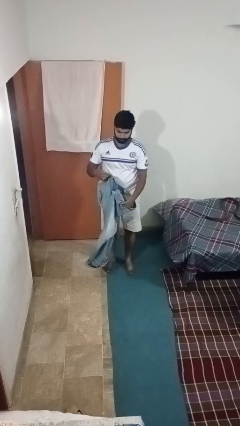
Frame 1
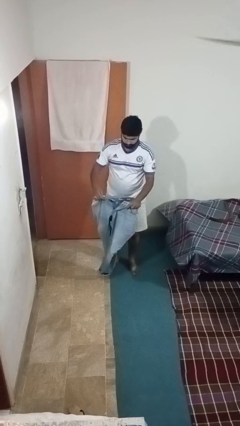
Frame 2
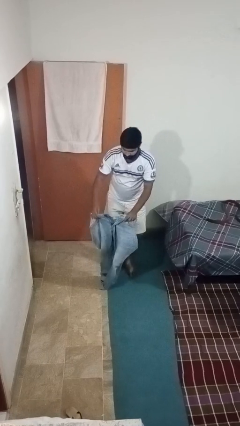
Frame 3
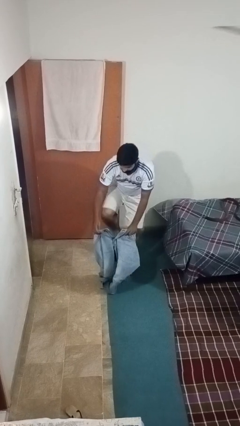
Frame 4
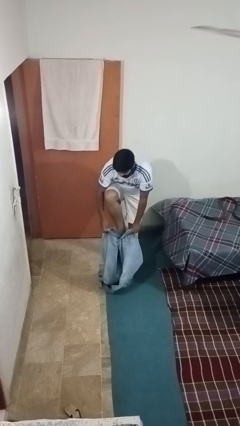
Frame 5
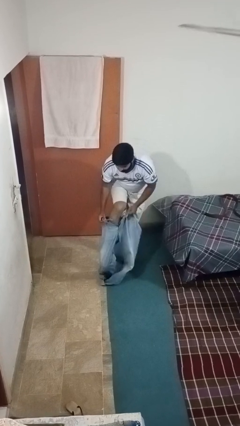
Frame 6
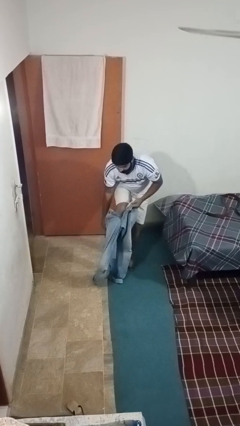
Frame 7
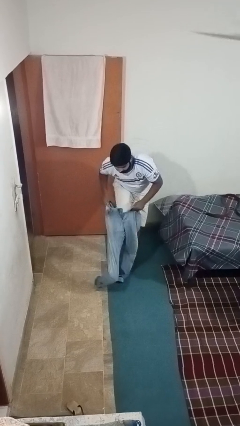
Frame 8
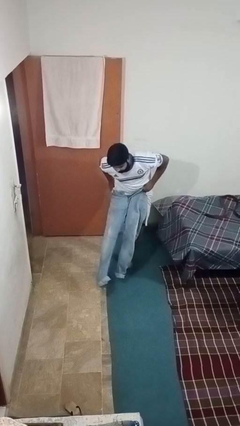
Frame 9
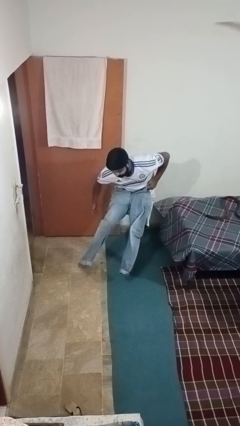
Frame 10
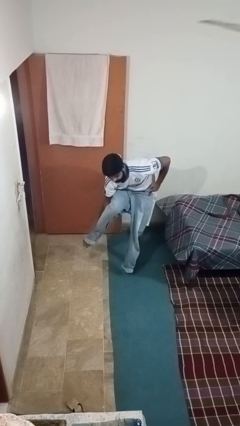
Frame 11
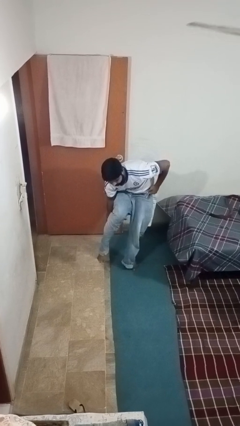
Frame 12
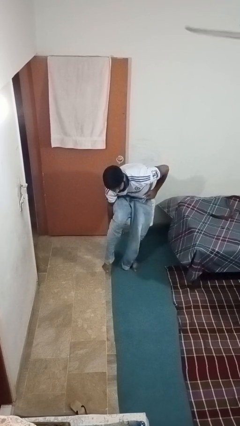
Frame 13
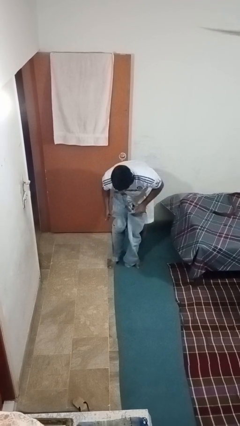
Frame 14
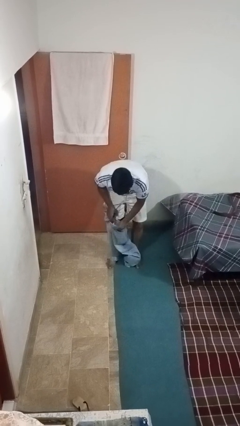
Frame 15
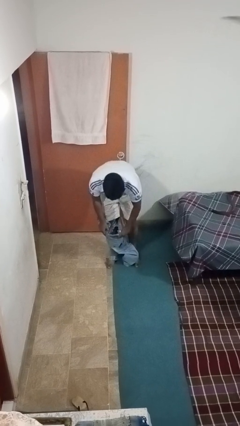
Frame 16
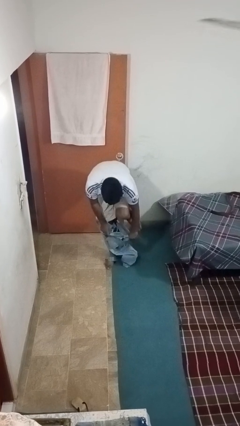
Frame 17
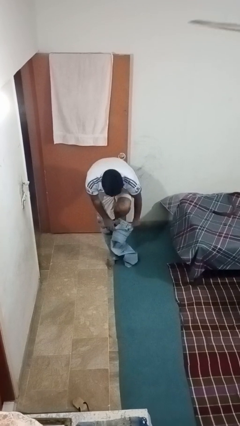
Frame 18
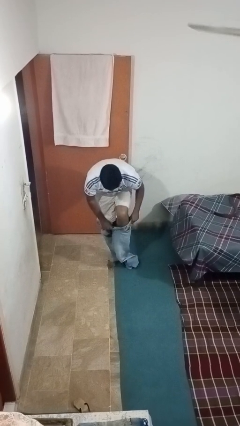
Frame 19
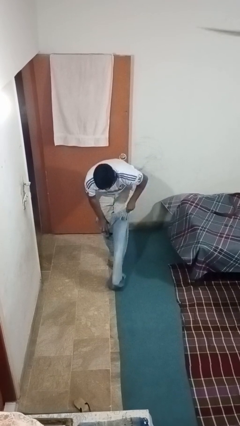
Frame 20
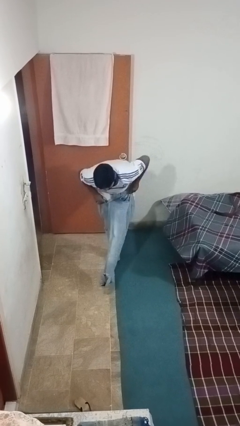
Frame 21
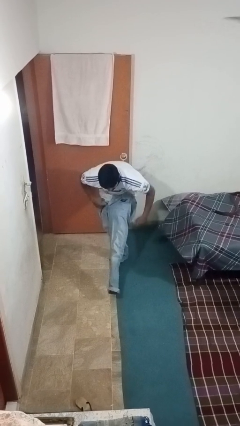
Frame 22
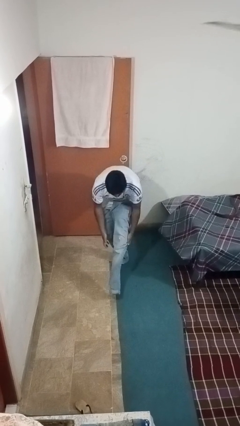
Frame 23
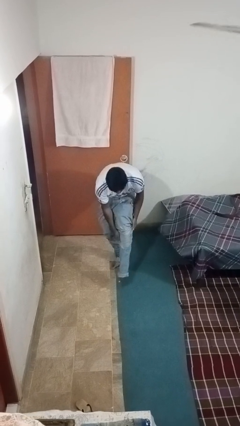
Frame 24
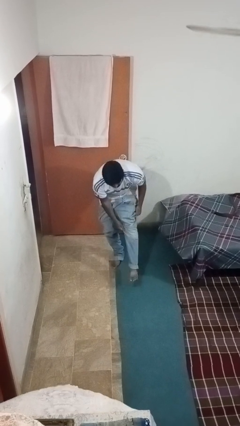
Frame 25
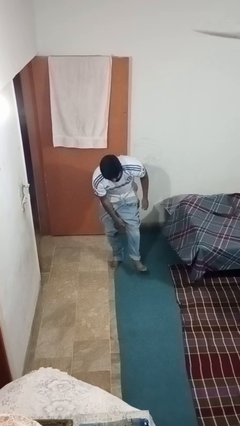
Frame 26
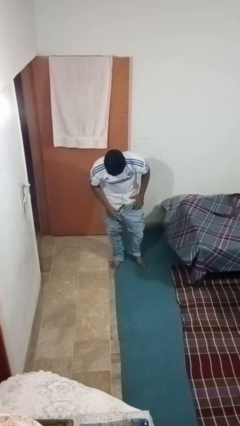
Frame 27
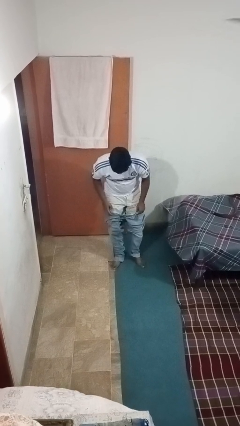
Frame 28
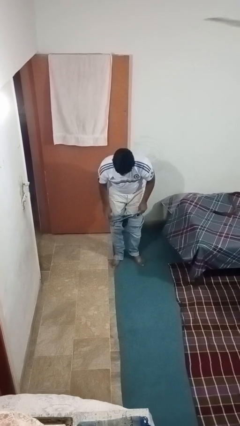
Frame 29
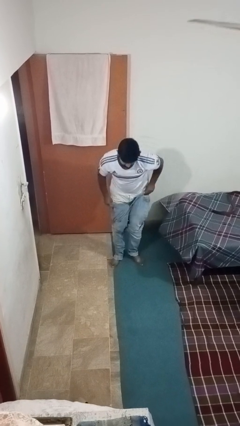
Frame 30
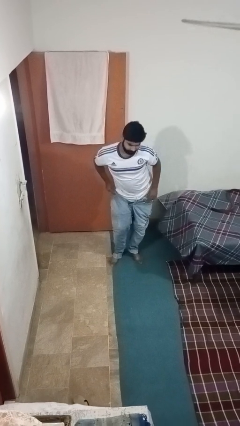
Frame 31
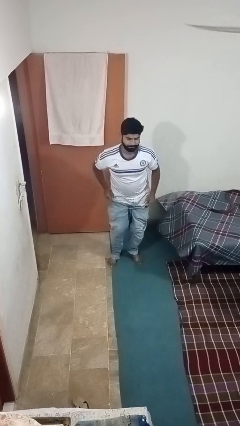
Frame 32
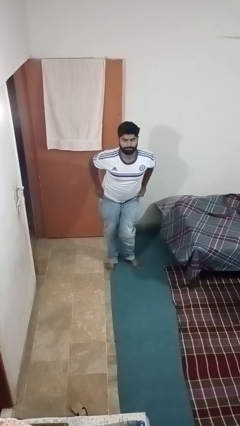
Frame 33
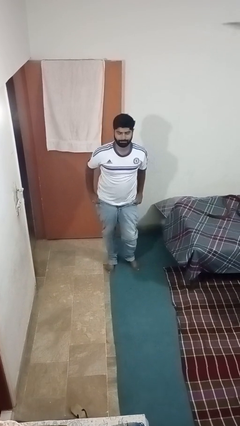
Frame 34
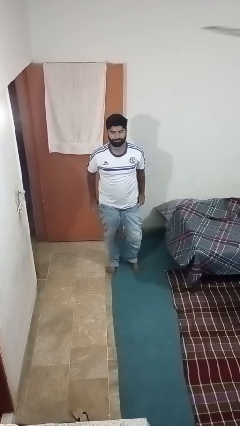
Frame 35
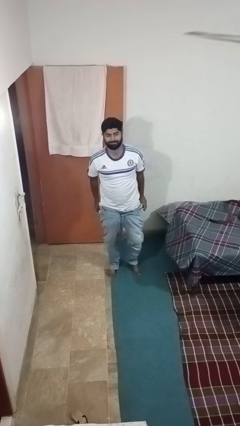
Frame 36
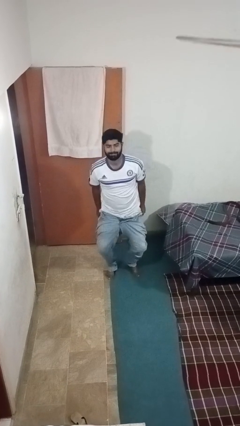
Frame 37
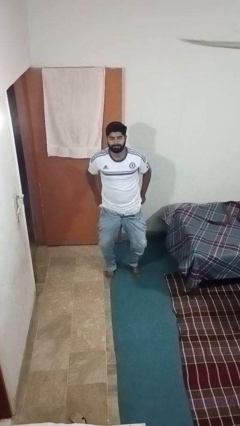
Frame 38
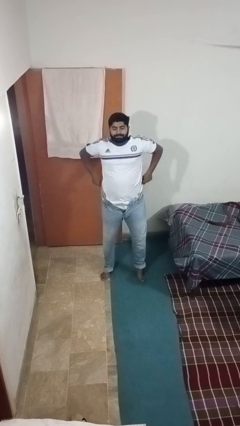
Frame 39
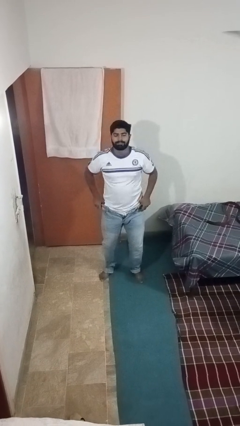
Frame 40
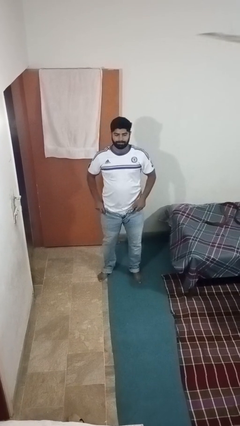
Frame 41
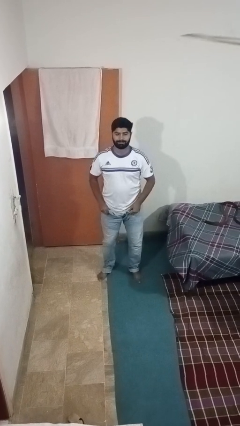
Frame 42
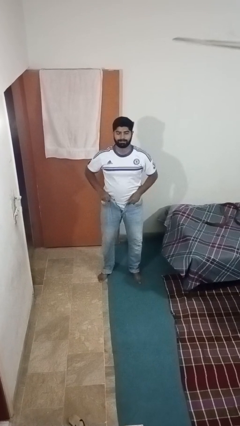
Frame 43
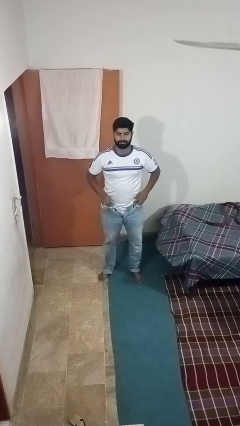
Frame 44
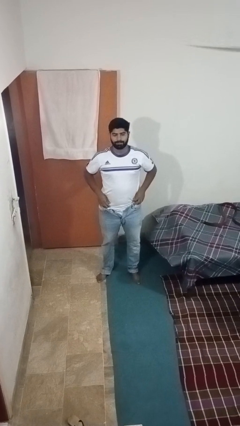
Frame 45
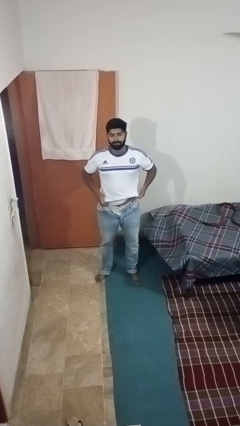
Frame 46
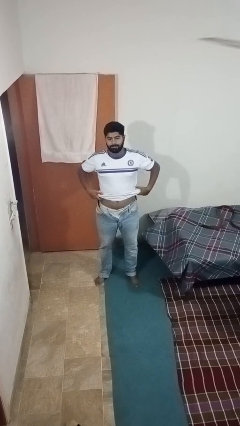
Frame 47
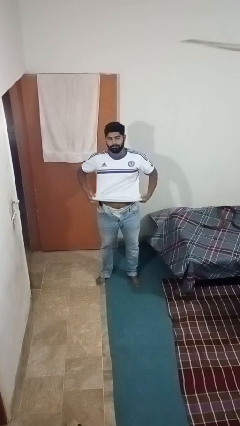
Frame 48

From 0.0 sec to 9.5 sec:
person puts on pants

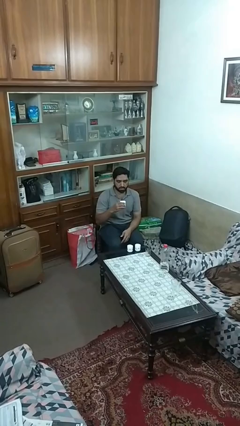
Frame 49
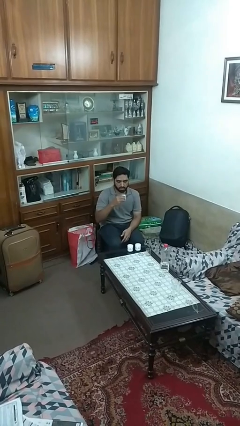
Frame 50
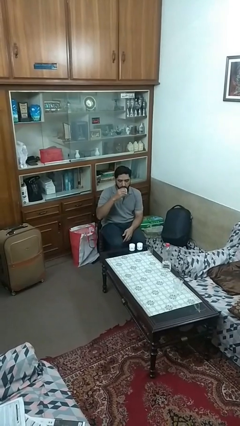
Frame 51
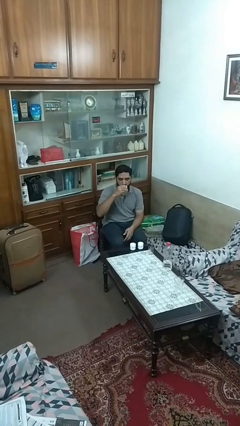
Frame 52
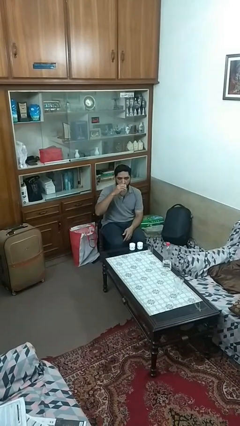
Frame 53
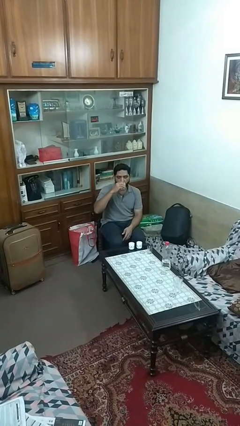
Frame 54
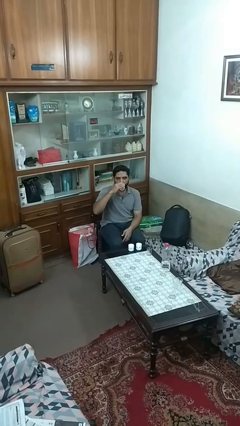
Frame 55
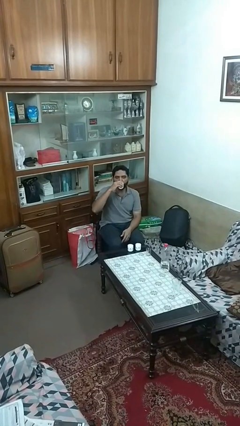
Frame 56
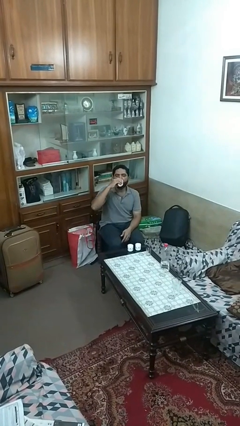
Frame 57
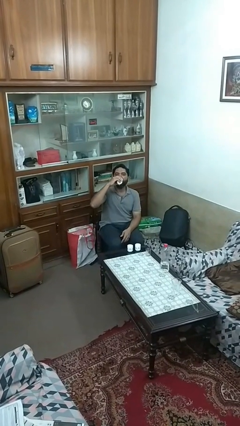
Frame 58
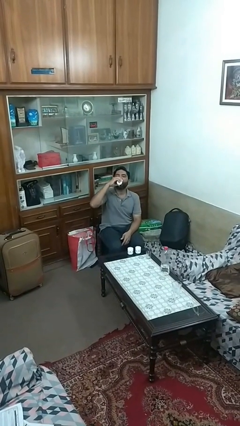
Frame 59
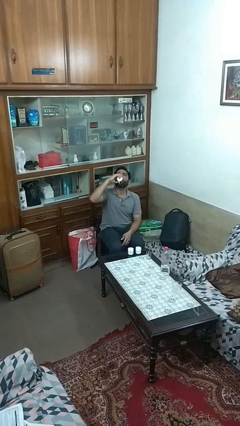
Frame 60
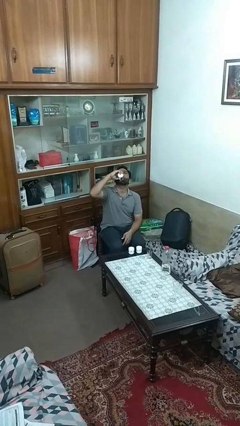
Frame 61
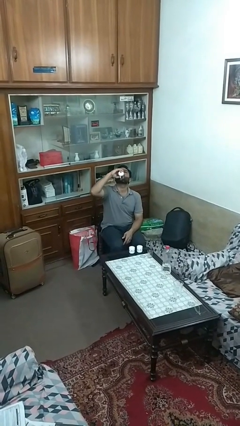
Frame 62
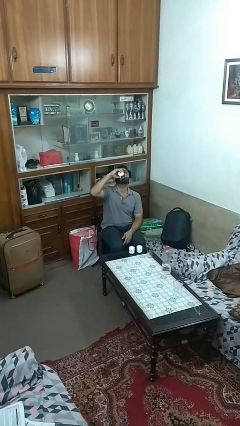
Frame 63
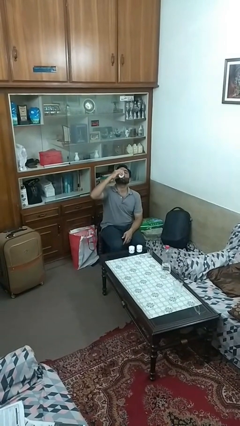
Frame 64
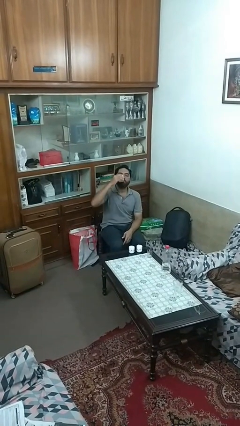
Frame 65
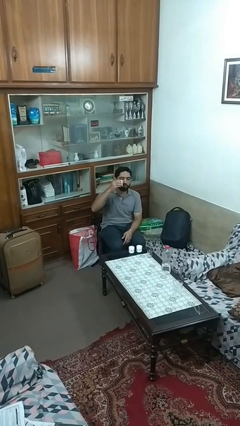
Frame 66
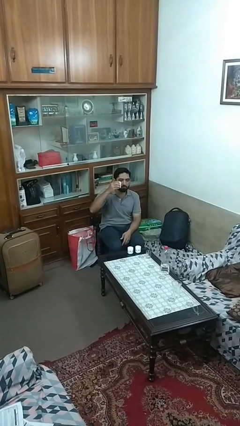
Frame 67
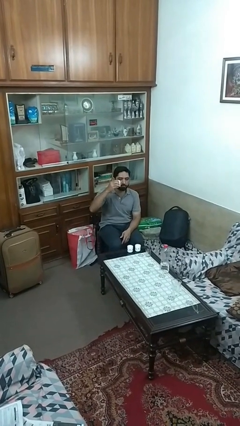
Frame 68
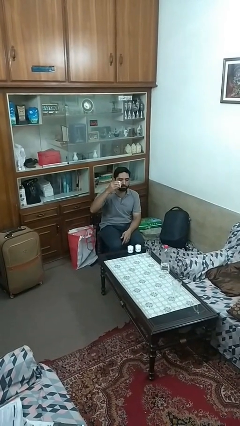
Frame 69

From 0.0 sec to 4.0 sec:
person drinks from shotglass

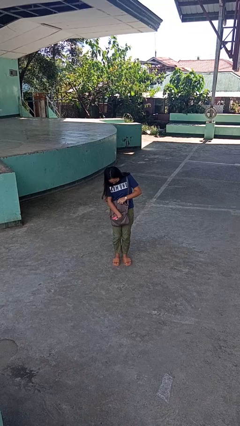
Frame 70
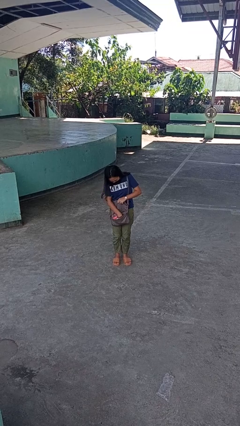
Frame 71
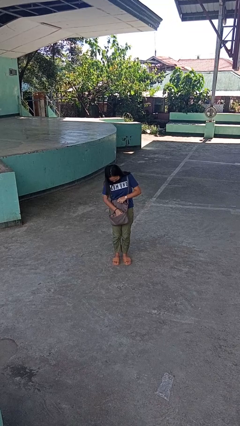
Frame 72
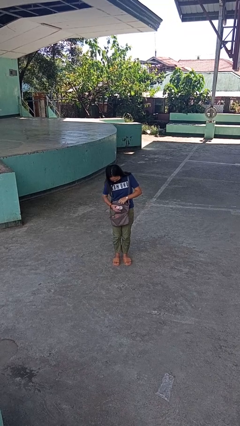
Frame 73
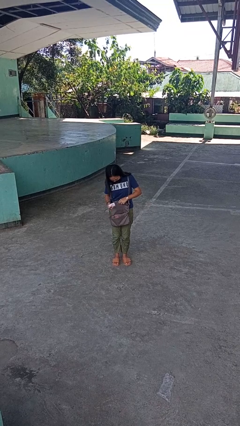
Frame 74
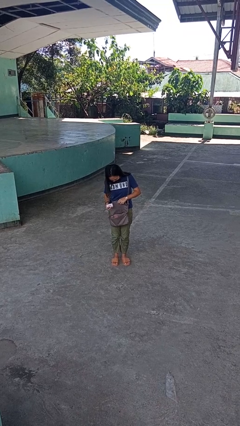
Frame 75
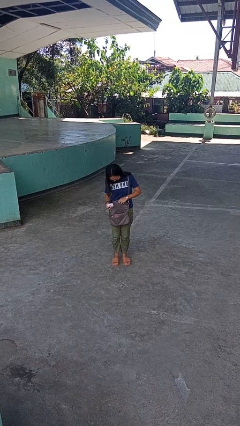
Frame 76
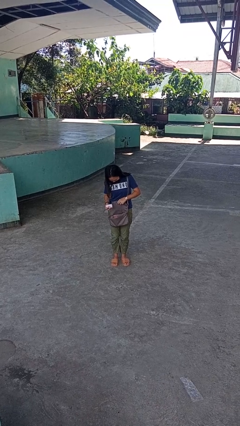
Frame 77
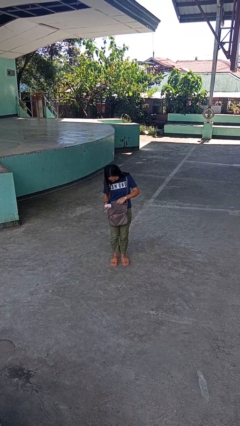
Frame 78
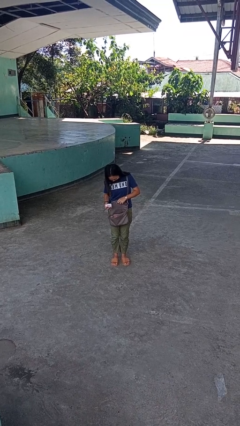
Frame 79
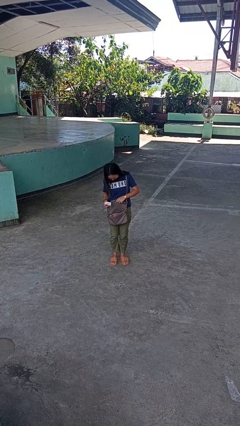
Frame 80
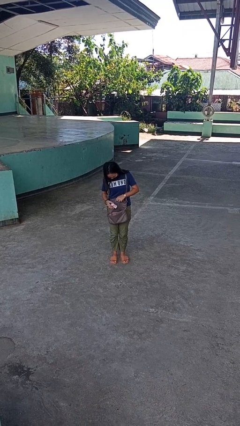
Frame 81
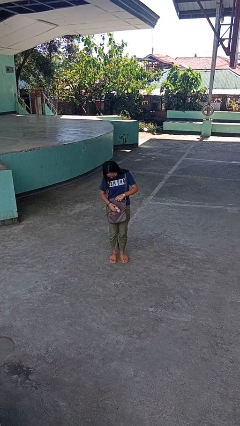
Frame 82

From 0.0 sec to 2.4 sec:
person takes object from purse

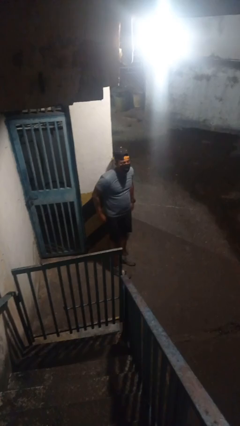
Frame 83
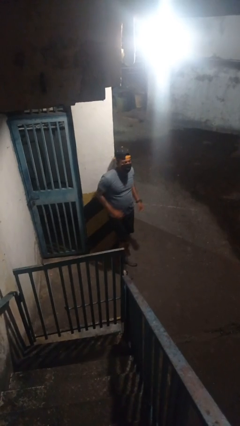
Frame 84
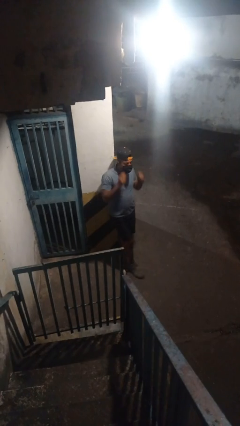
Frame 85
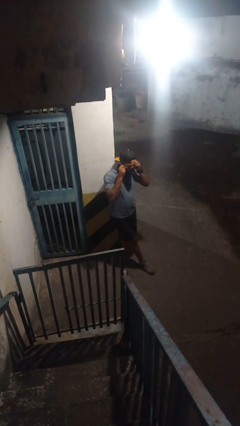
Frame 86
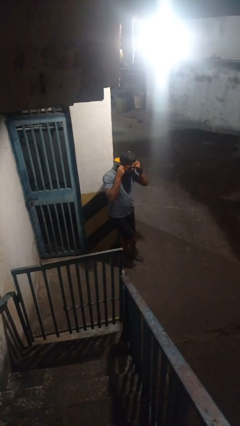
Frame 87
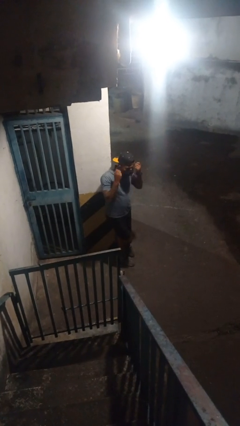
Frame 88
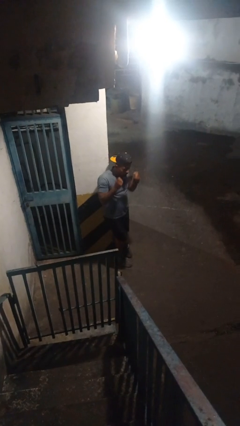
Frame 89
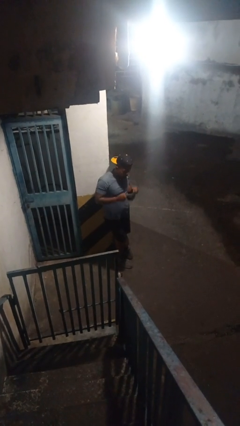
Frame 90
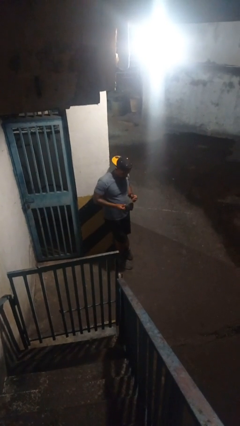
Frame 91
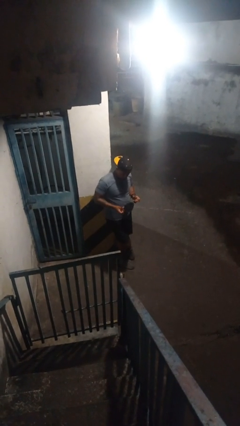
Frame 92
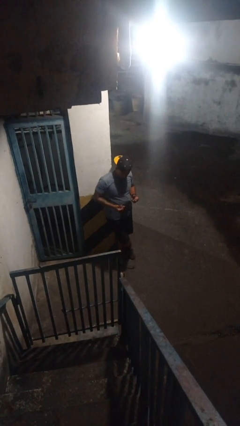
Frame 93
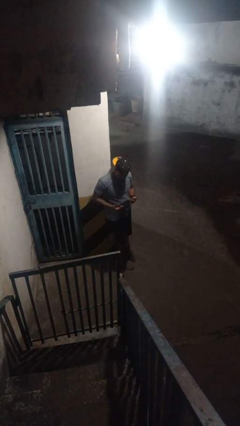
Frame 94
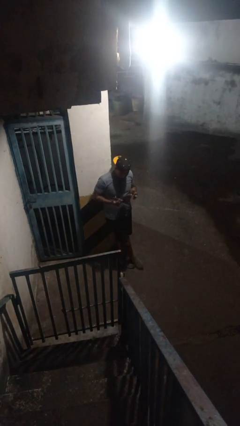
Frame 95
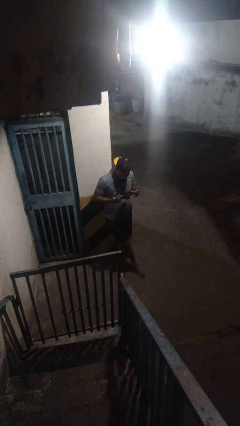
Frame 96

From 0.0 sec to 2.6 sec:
person takes off facemask
